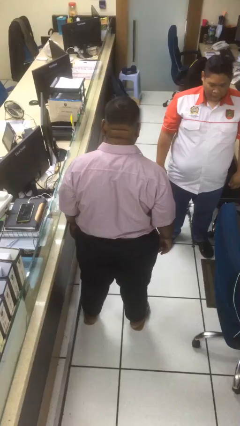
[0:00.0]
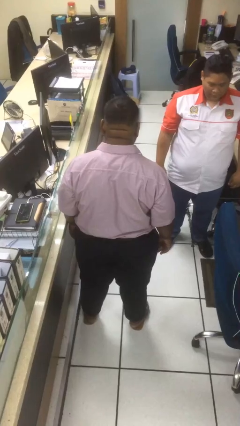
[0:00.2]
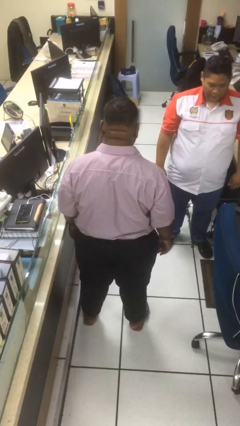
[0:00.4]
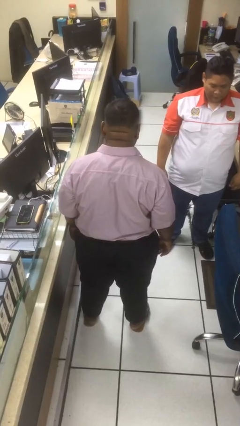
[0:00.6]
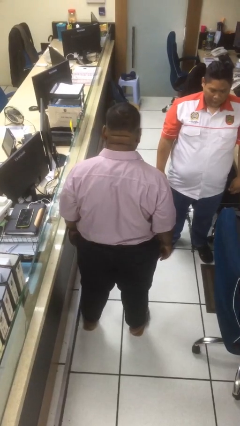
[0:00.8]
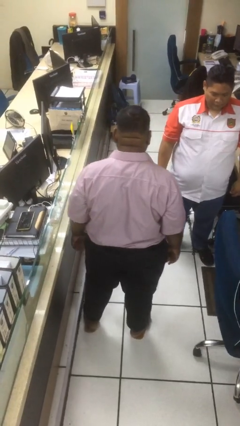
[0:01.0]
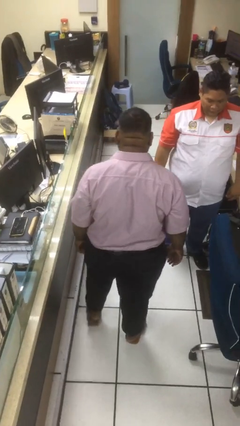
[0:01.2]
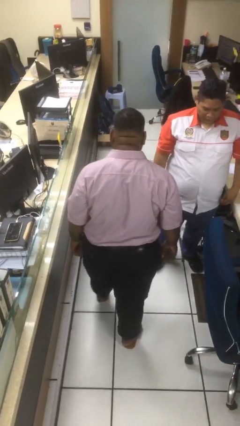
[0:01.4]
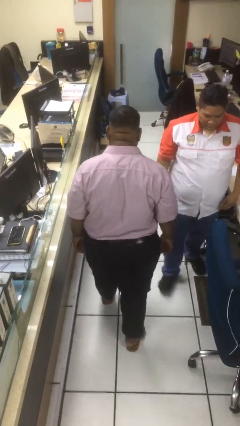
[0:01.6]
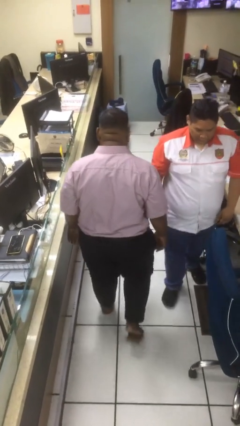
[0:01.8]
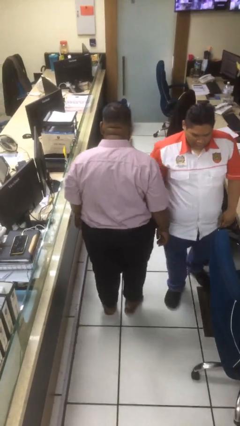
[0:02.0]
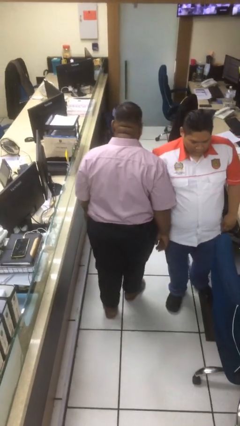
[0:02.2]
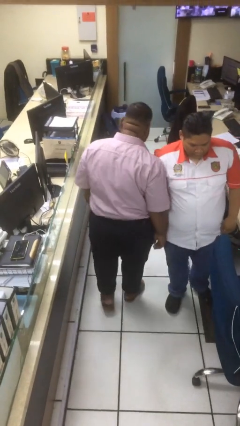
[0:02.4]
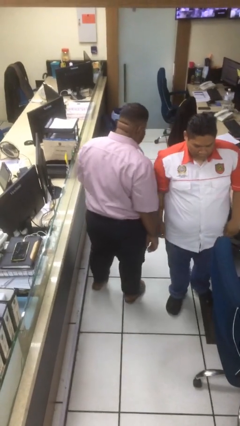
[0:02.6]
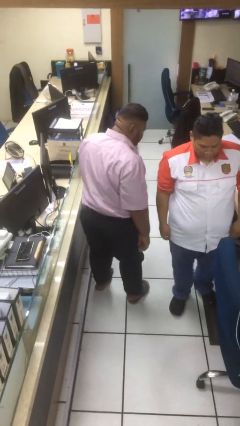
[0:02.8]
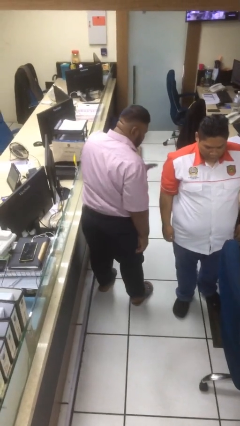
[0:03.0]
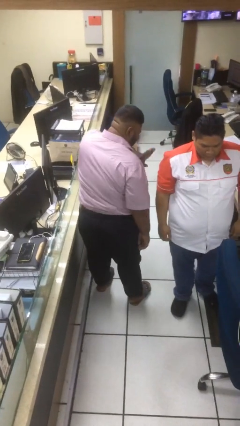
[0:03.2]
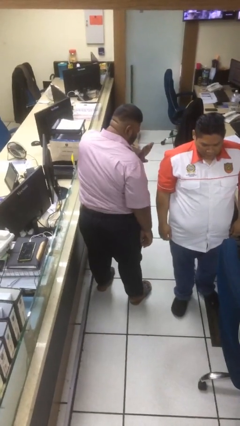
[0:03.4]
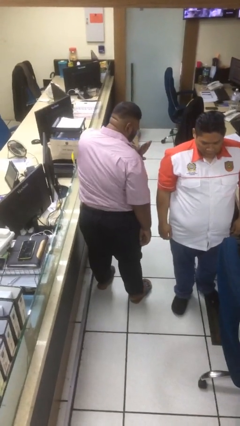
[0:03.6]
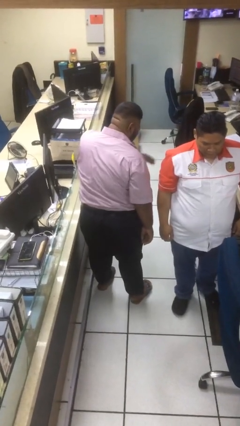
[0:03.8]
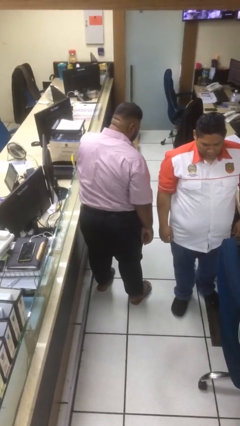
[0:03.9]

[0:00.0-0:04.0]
person bumps into person

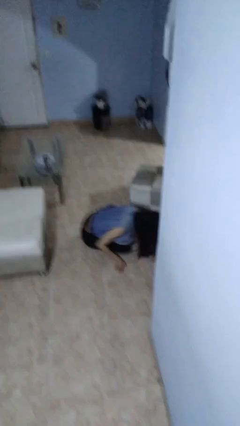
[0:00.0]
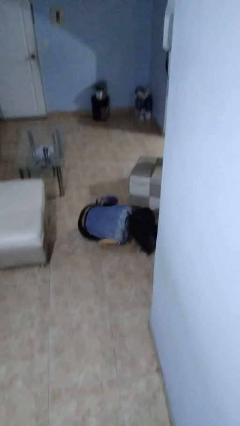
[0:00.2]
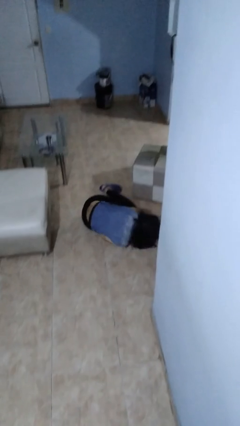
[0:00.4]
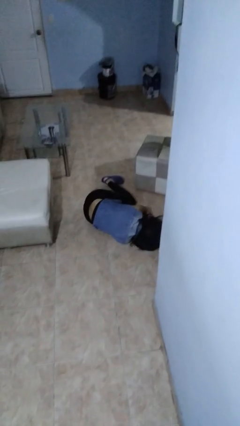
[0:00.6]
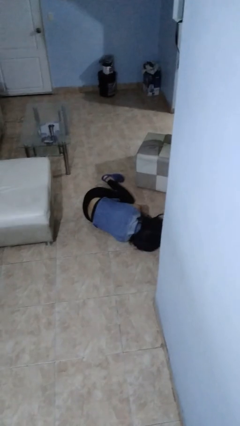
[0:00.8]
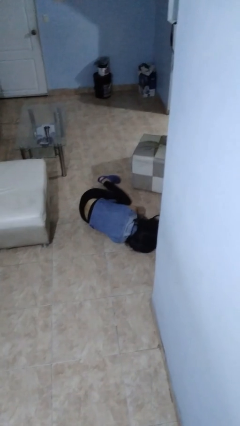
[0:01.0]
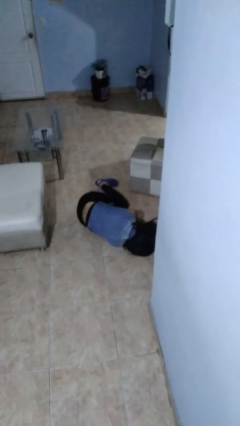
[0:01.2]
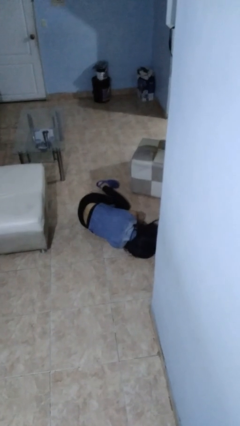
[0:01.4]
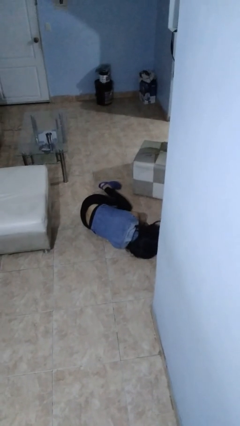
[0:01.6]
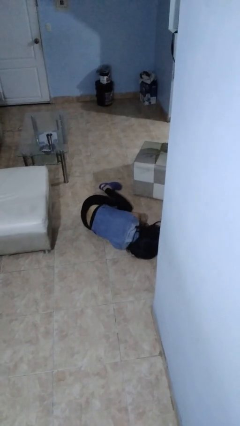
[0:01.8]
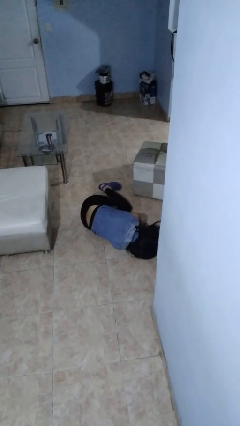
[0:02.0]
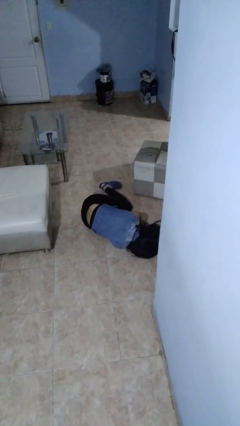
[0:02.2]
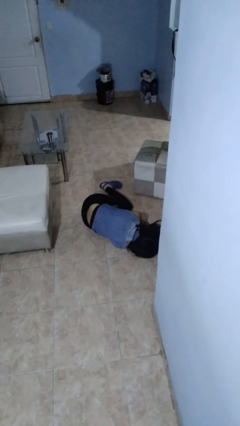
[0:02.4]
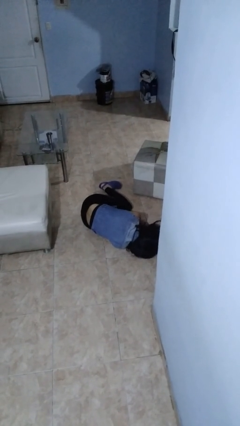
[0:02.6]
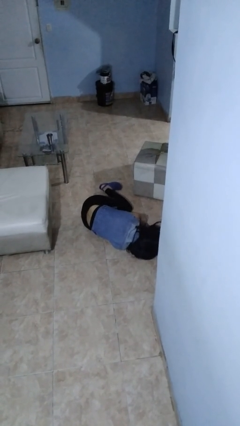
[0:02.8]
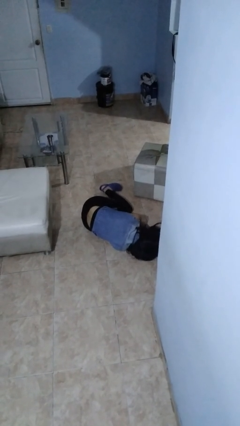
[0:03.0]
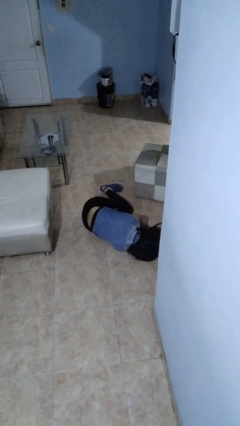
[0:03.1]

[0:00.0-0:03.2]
person lies down on floor

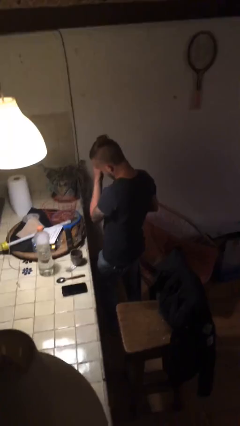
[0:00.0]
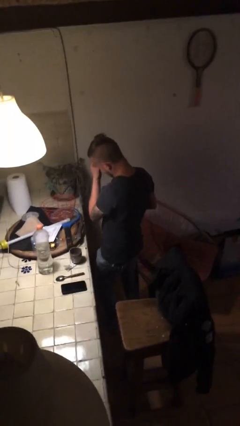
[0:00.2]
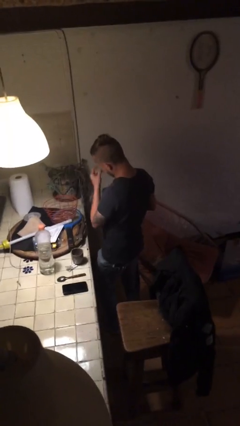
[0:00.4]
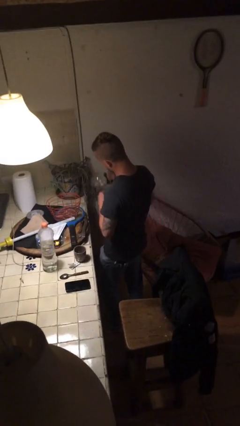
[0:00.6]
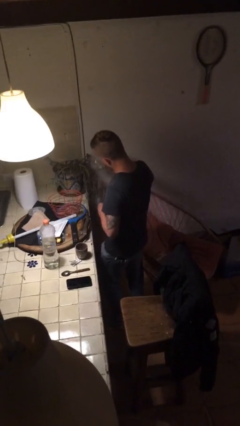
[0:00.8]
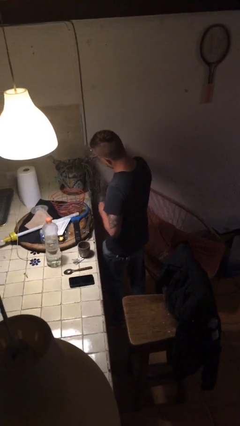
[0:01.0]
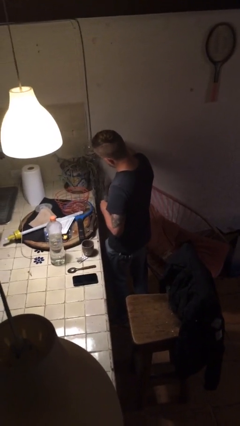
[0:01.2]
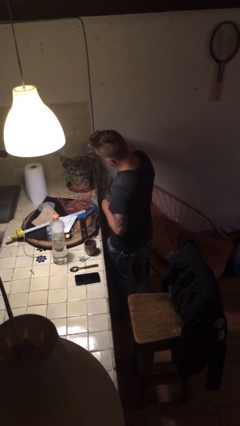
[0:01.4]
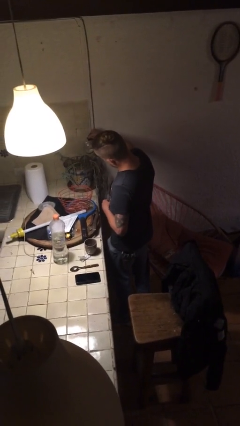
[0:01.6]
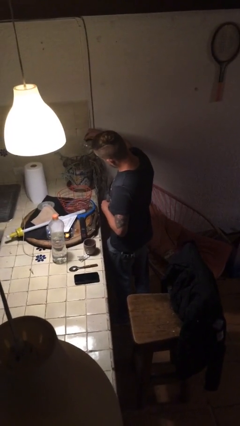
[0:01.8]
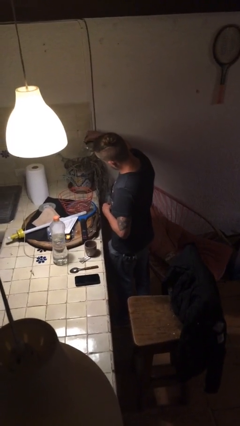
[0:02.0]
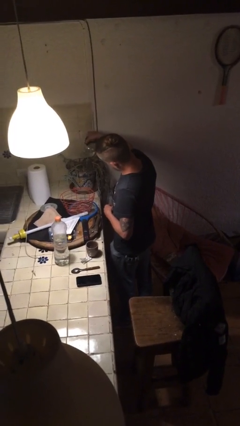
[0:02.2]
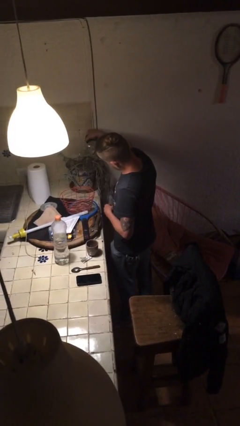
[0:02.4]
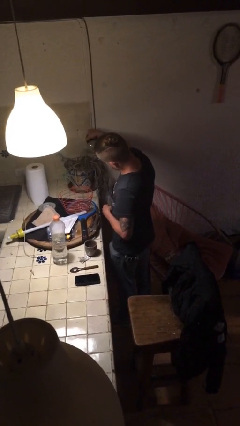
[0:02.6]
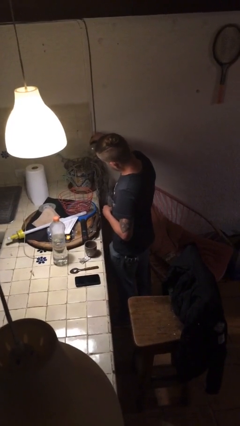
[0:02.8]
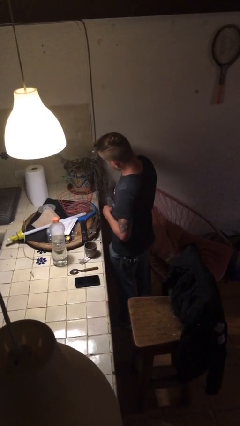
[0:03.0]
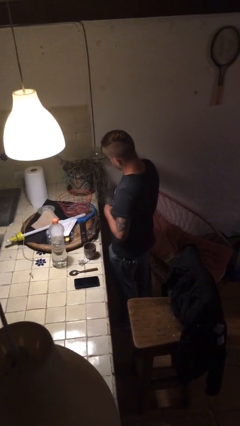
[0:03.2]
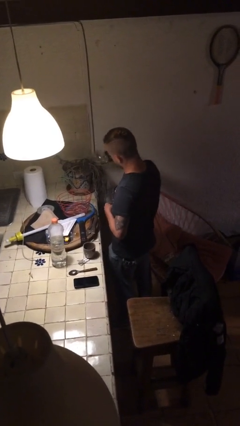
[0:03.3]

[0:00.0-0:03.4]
person waters houseplant

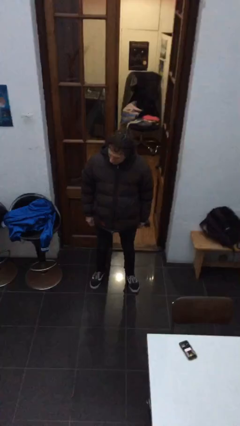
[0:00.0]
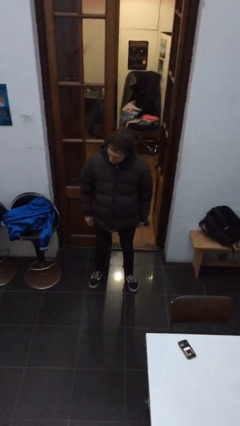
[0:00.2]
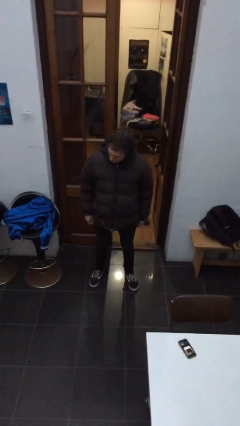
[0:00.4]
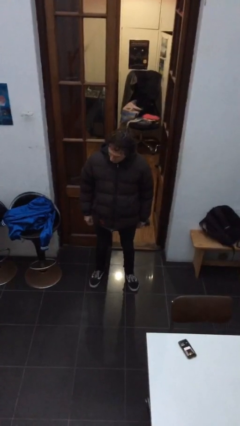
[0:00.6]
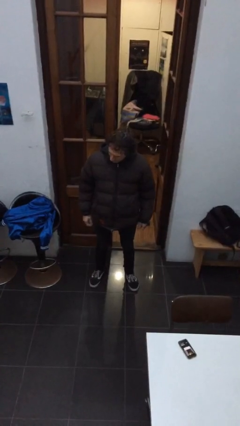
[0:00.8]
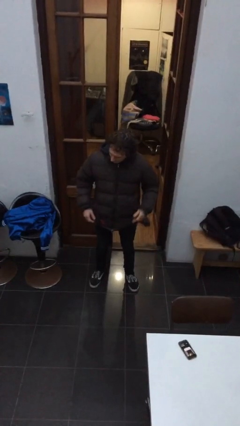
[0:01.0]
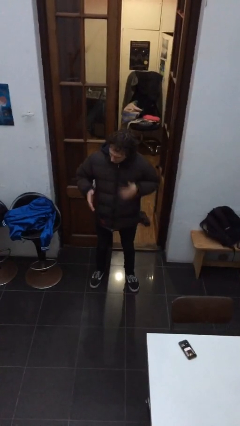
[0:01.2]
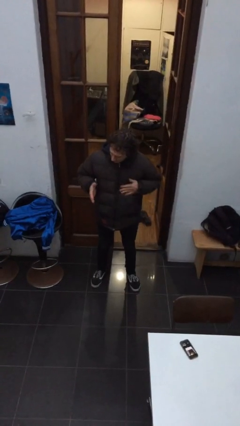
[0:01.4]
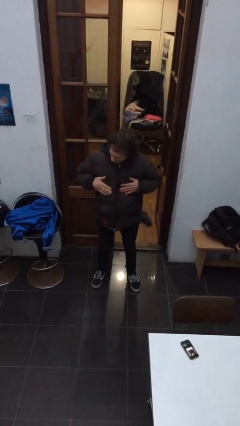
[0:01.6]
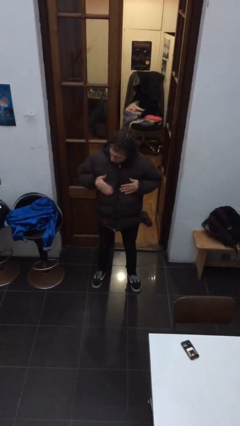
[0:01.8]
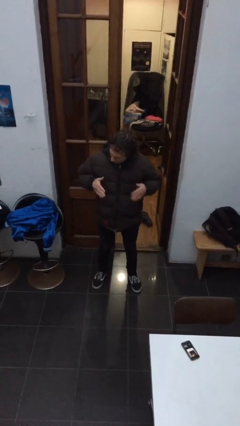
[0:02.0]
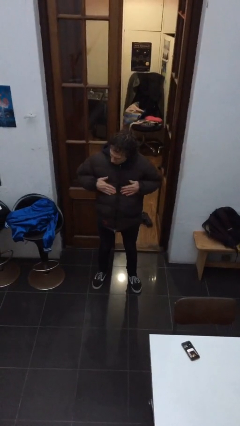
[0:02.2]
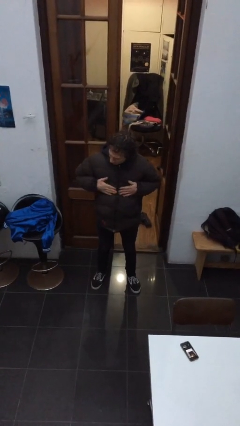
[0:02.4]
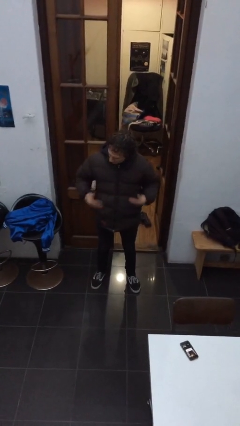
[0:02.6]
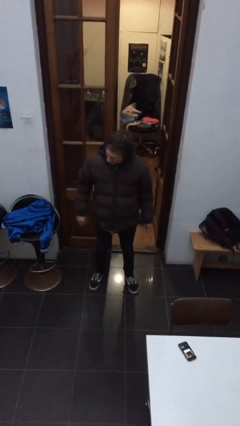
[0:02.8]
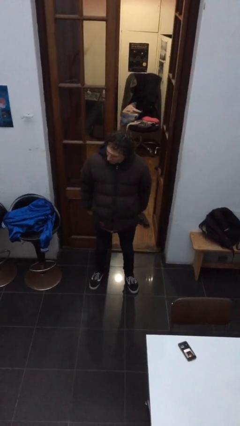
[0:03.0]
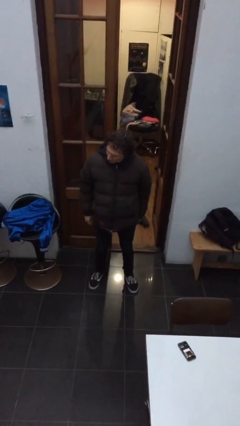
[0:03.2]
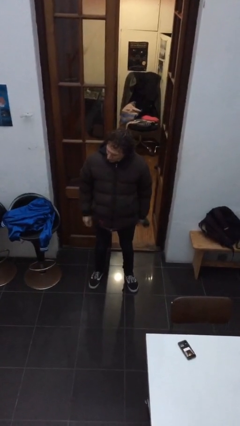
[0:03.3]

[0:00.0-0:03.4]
person drums on chest

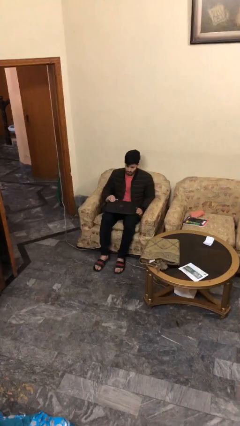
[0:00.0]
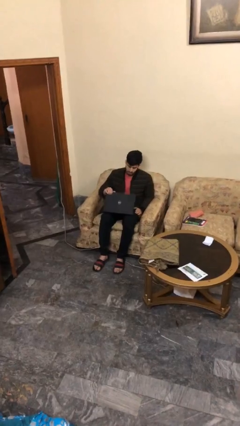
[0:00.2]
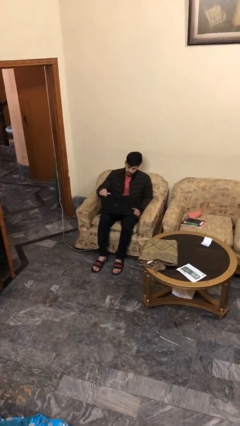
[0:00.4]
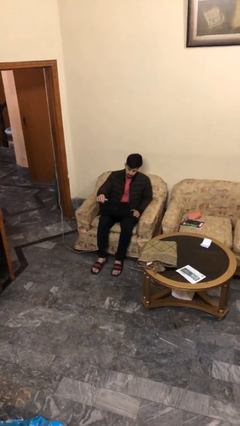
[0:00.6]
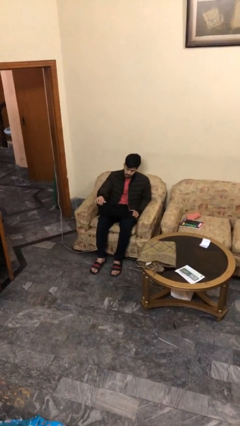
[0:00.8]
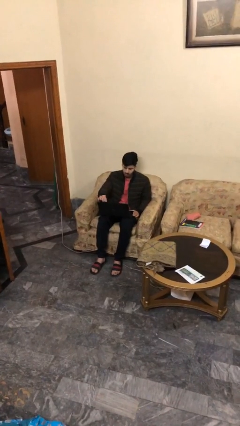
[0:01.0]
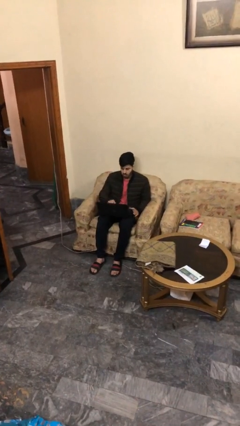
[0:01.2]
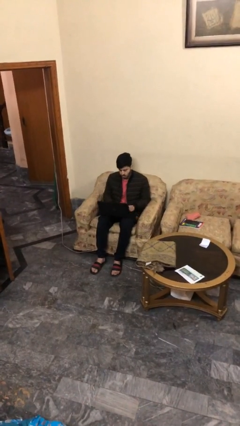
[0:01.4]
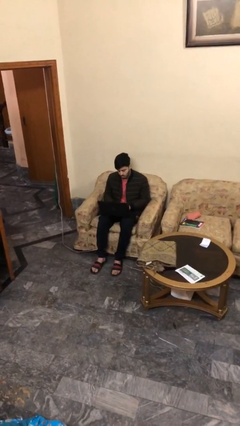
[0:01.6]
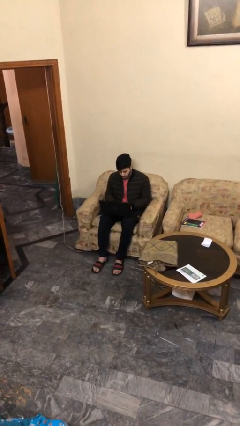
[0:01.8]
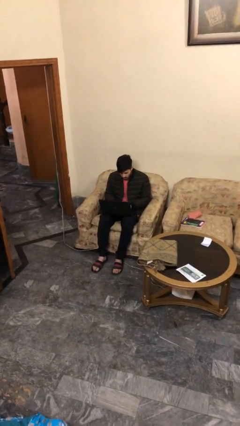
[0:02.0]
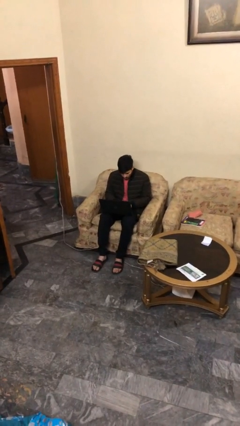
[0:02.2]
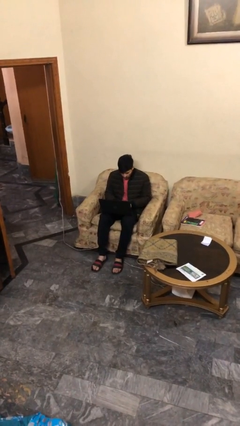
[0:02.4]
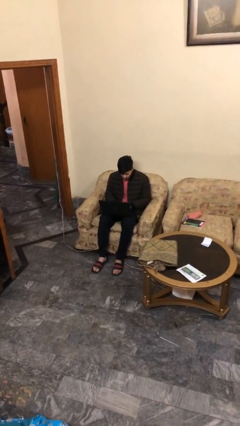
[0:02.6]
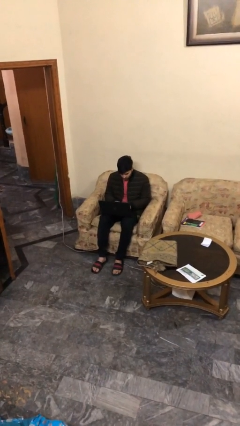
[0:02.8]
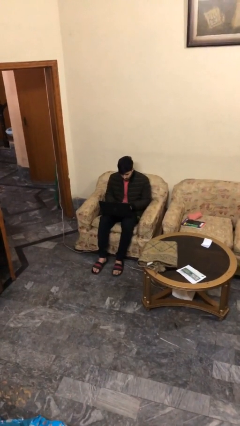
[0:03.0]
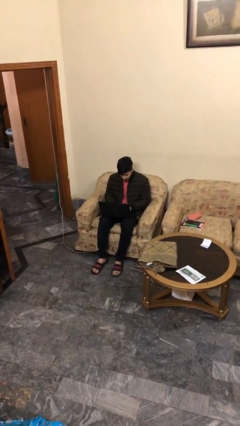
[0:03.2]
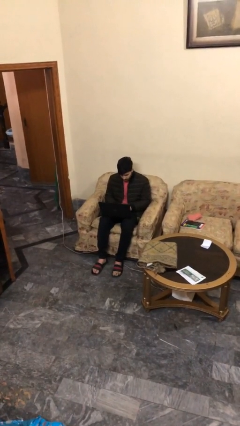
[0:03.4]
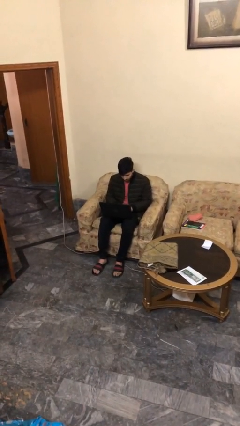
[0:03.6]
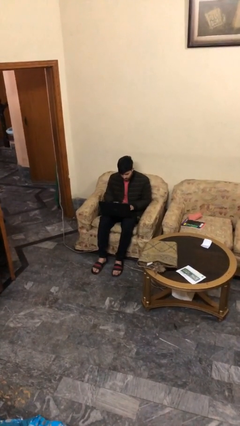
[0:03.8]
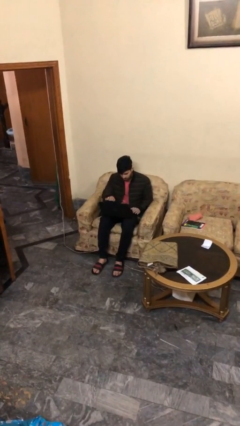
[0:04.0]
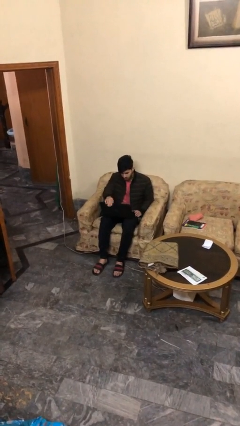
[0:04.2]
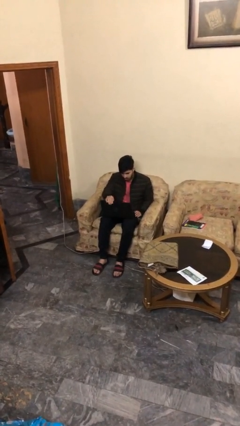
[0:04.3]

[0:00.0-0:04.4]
person interacts with laptop
